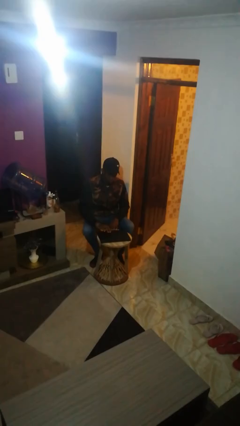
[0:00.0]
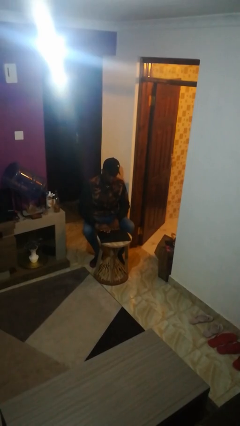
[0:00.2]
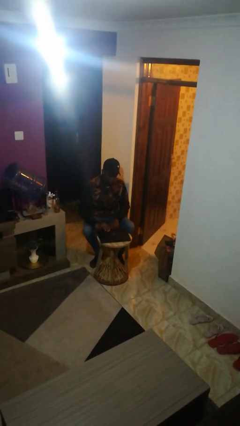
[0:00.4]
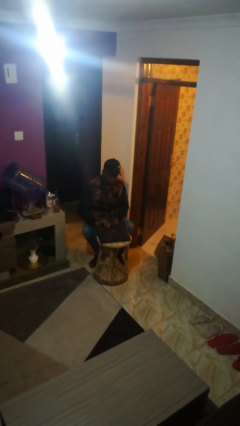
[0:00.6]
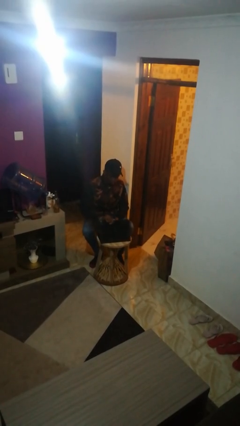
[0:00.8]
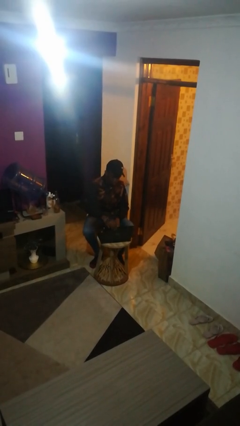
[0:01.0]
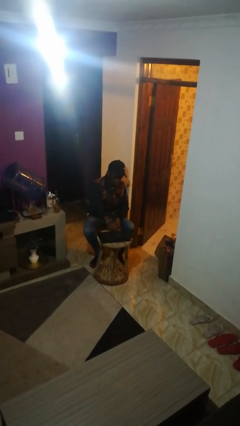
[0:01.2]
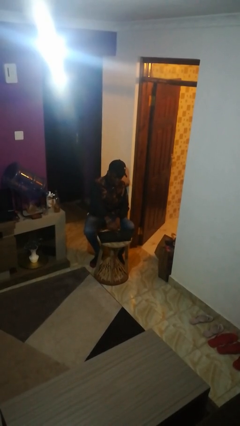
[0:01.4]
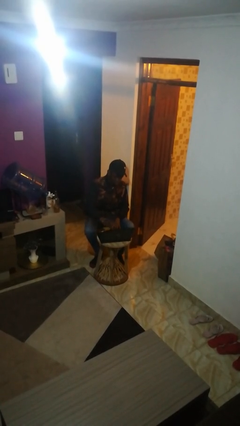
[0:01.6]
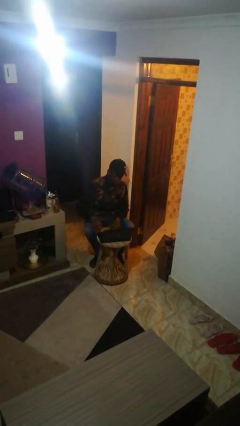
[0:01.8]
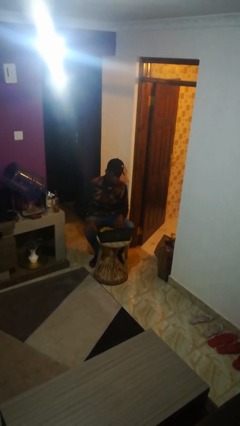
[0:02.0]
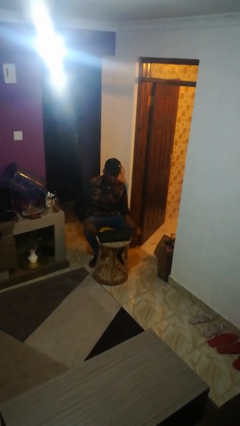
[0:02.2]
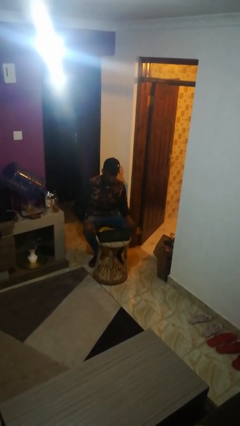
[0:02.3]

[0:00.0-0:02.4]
person opens laptop

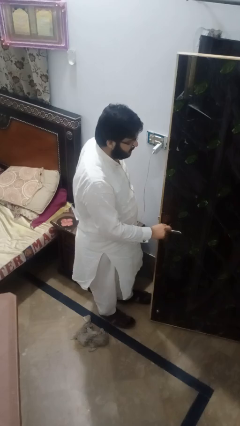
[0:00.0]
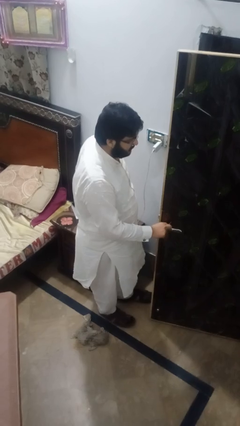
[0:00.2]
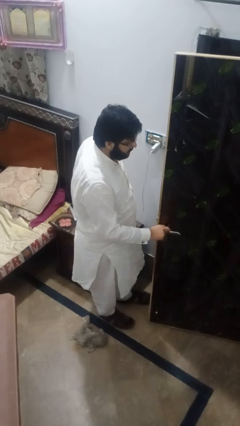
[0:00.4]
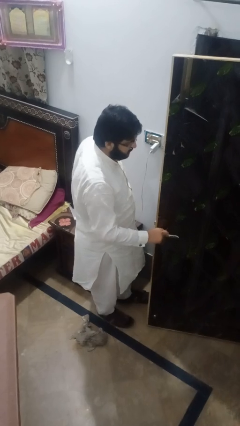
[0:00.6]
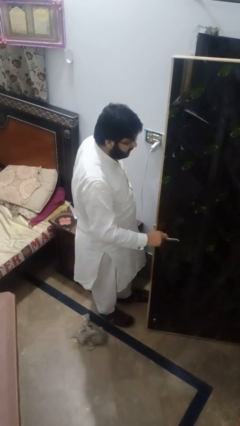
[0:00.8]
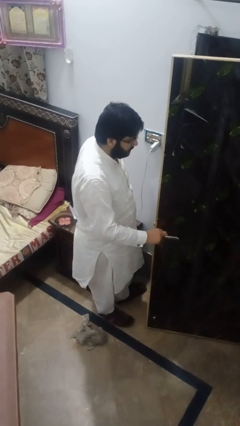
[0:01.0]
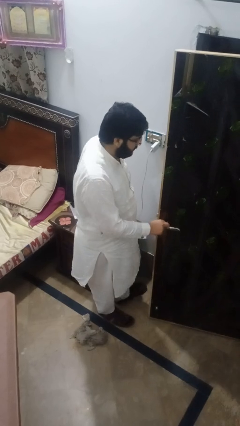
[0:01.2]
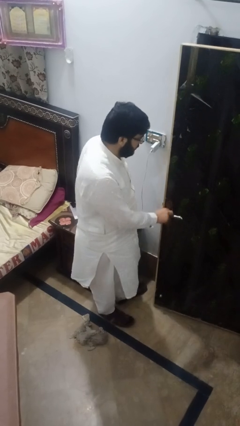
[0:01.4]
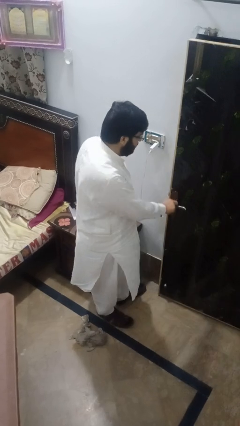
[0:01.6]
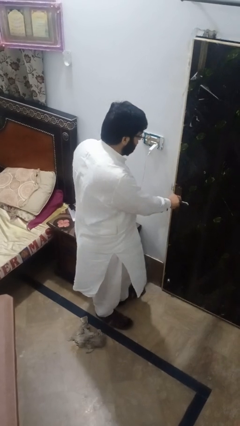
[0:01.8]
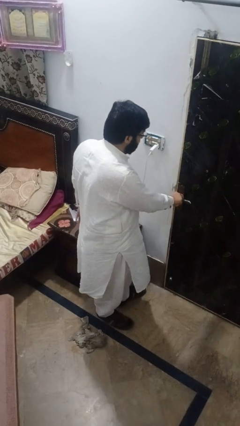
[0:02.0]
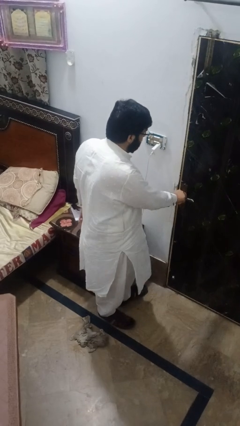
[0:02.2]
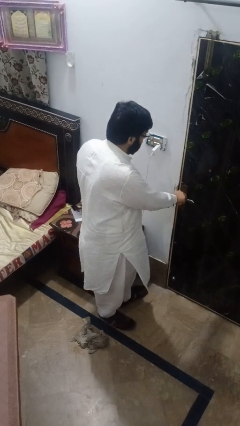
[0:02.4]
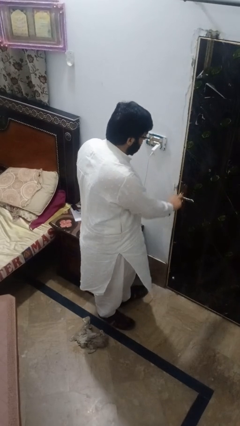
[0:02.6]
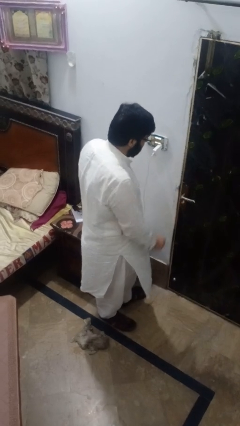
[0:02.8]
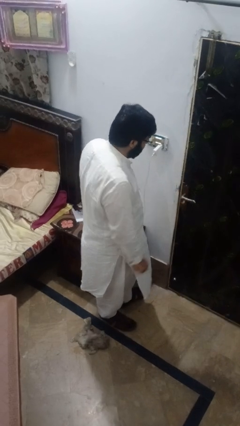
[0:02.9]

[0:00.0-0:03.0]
person closes facility door

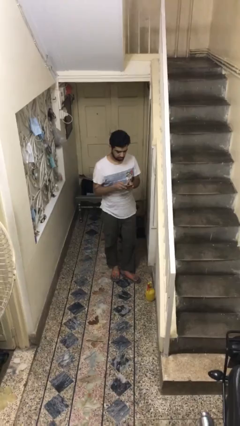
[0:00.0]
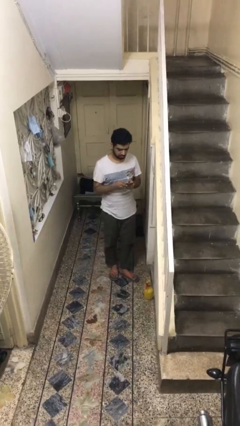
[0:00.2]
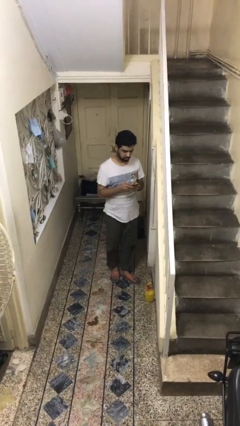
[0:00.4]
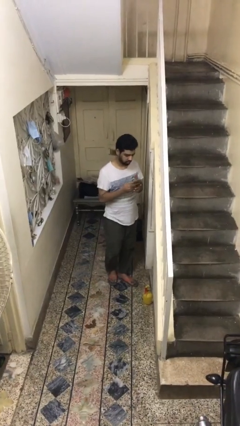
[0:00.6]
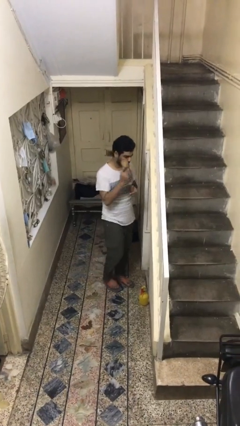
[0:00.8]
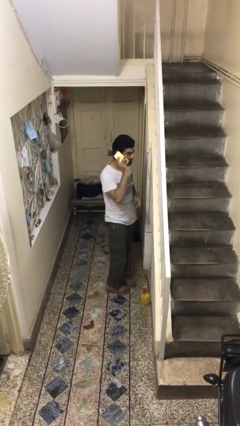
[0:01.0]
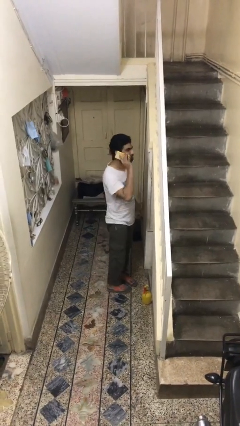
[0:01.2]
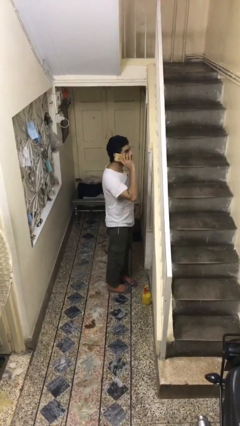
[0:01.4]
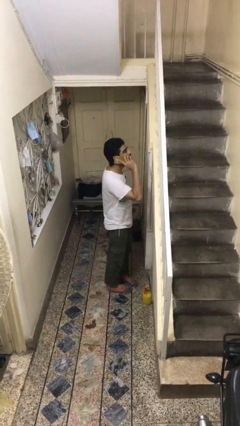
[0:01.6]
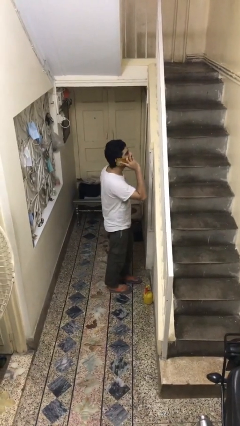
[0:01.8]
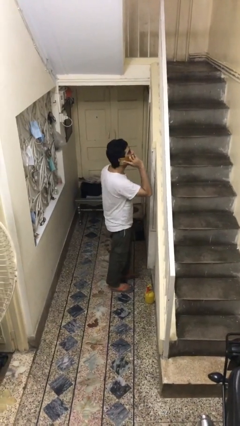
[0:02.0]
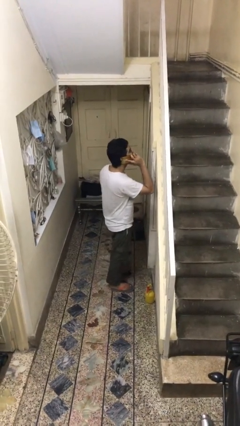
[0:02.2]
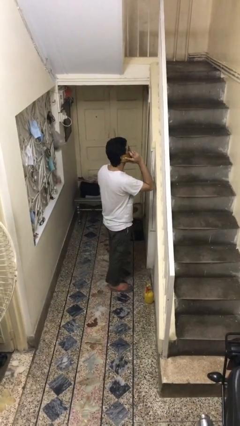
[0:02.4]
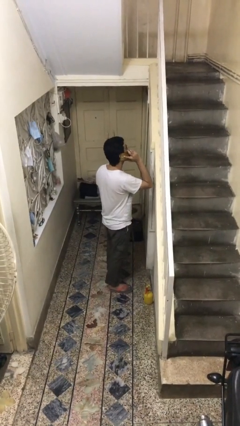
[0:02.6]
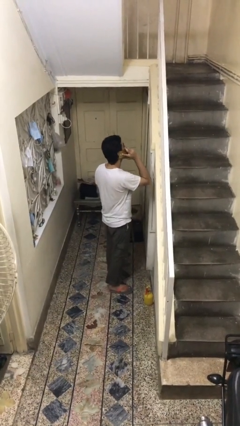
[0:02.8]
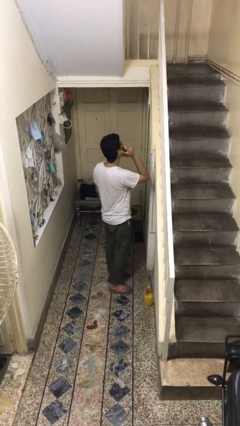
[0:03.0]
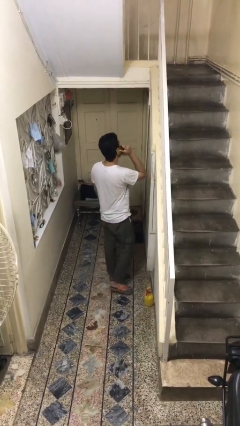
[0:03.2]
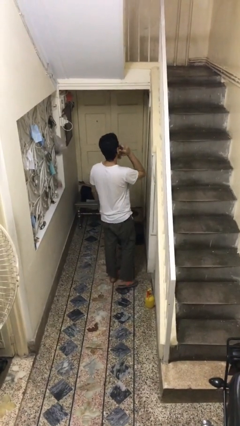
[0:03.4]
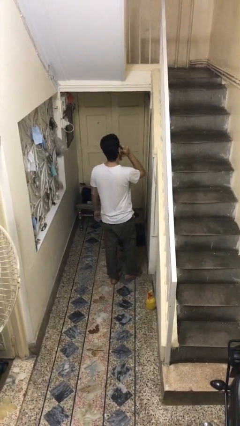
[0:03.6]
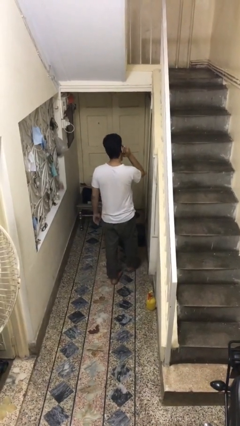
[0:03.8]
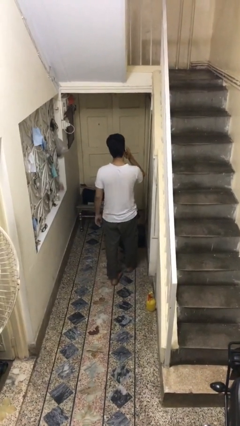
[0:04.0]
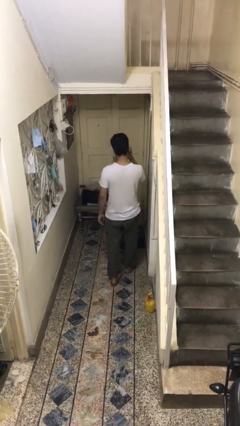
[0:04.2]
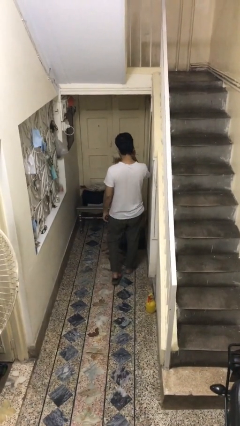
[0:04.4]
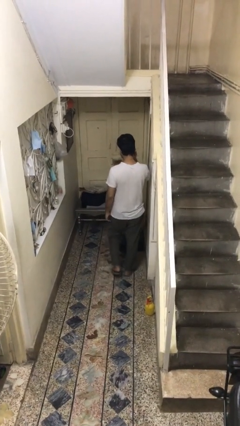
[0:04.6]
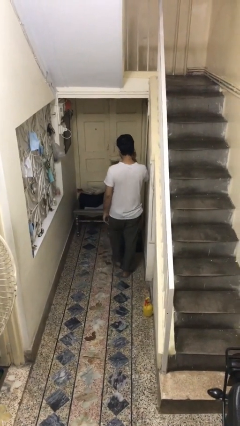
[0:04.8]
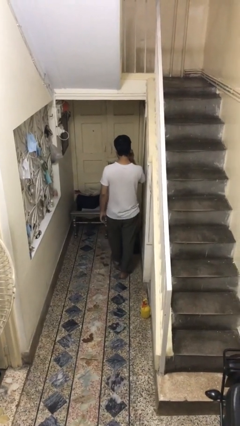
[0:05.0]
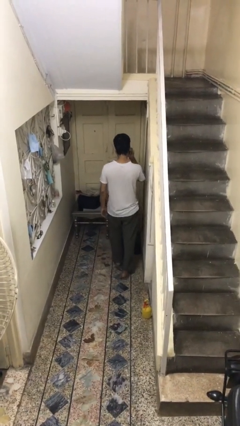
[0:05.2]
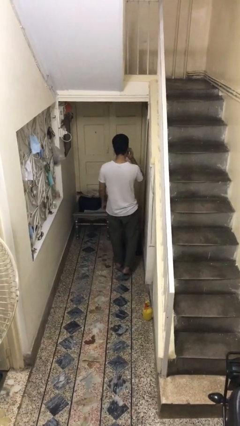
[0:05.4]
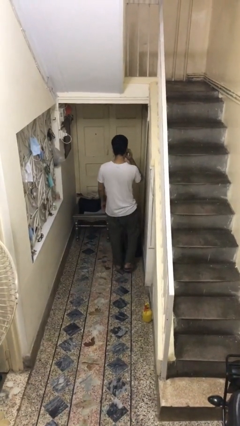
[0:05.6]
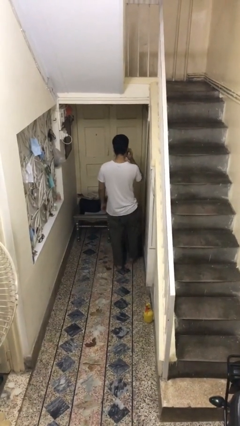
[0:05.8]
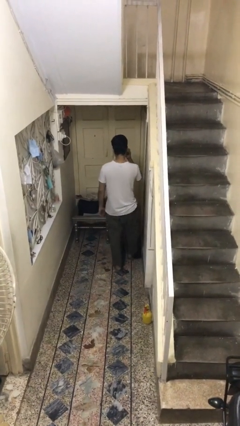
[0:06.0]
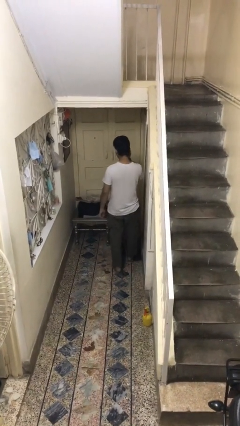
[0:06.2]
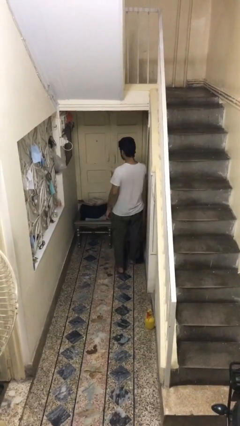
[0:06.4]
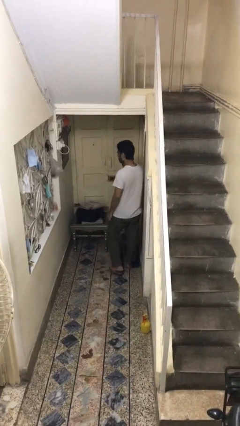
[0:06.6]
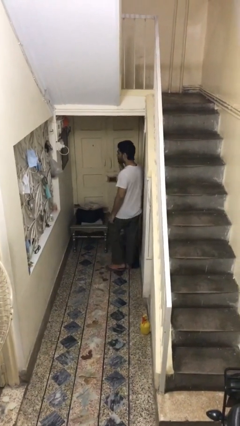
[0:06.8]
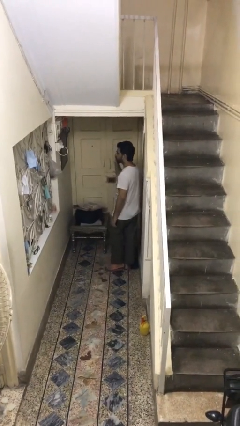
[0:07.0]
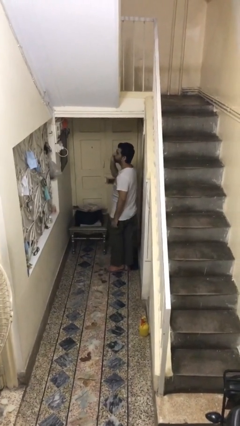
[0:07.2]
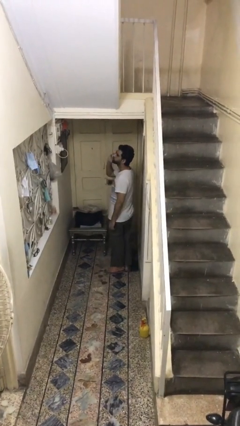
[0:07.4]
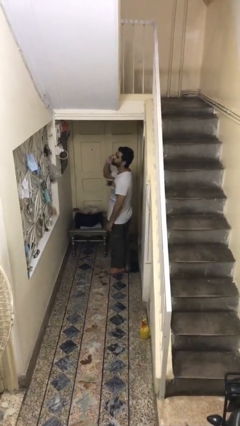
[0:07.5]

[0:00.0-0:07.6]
person talks on phone

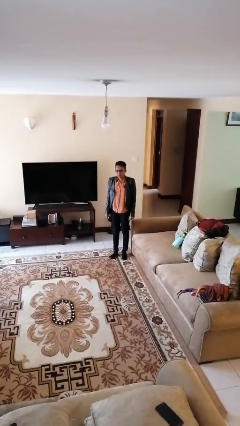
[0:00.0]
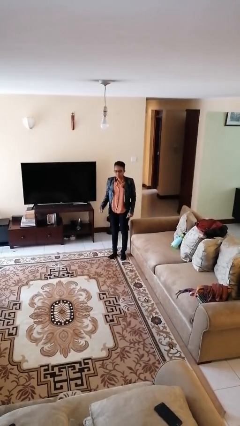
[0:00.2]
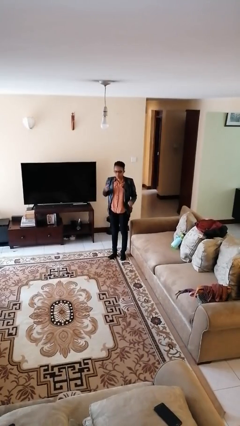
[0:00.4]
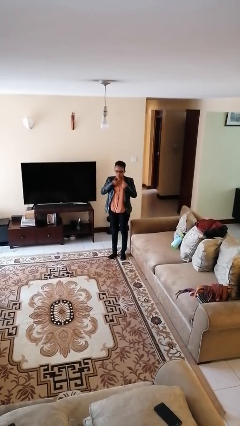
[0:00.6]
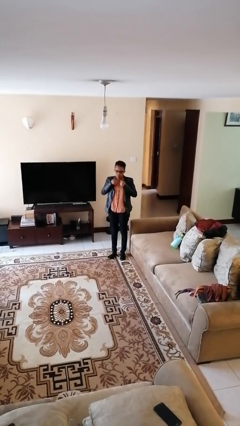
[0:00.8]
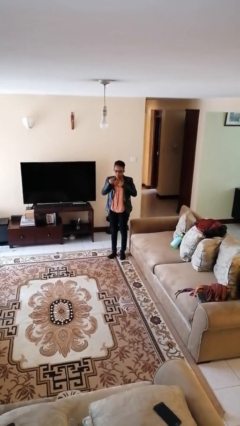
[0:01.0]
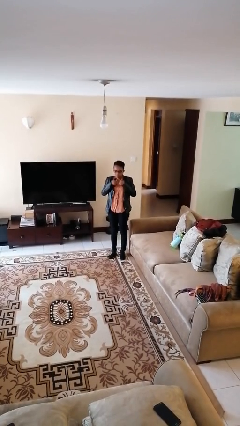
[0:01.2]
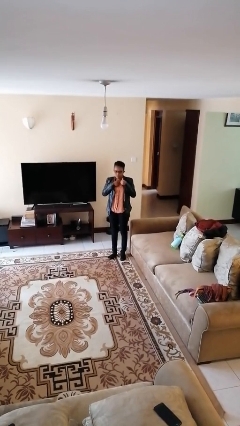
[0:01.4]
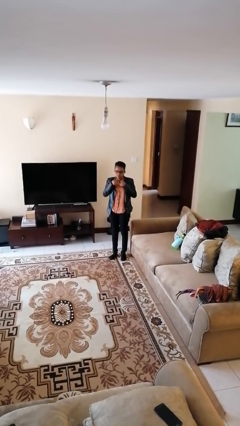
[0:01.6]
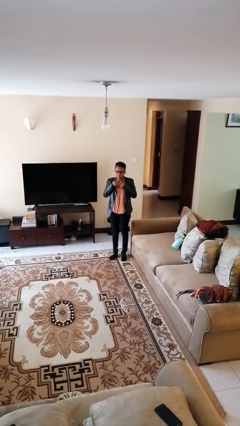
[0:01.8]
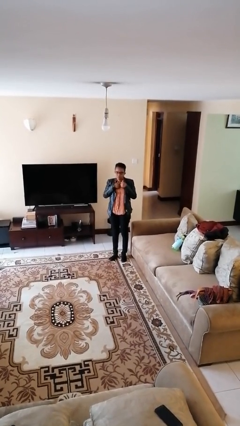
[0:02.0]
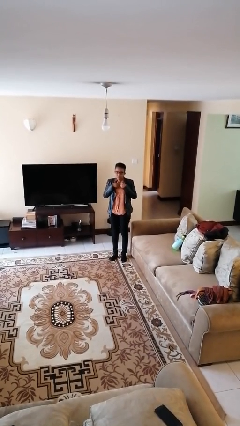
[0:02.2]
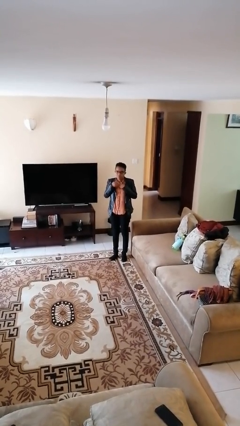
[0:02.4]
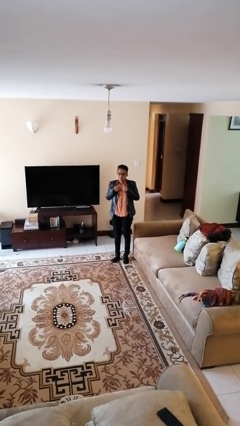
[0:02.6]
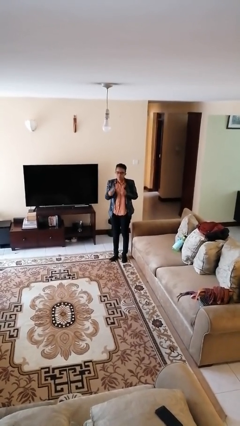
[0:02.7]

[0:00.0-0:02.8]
person drums on chest

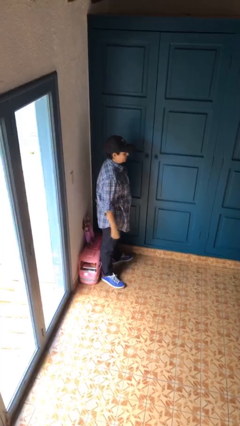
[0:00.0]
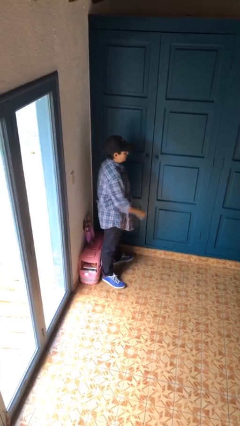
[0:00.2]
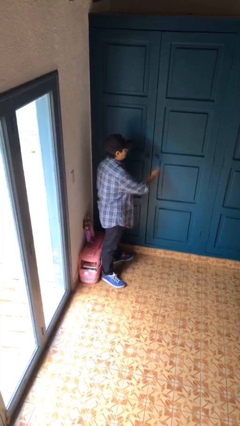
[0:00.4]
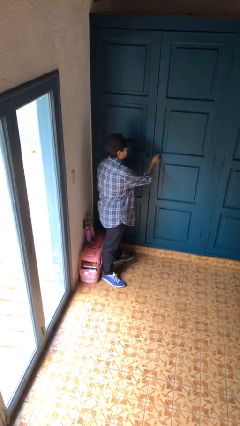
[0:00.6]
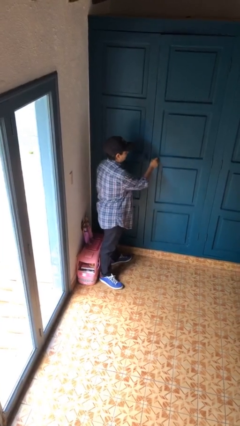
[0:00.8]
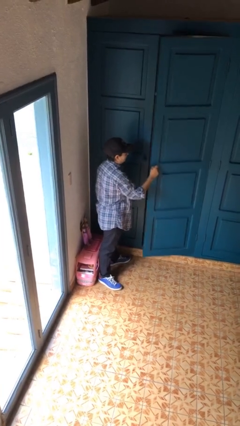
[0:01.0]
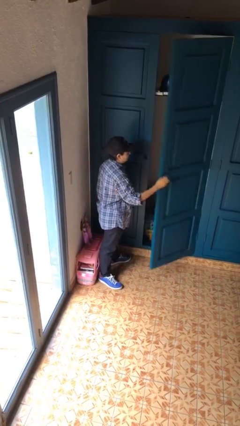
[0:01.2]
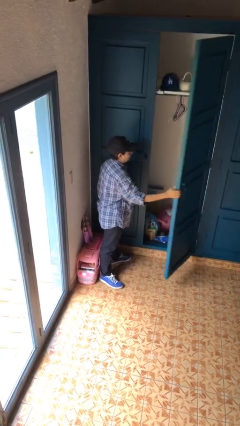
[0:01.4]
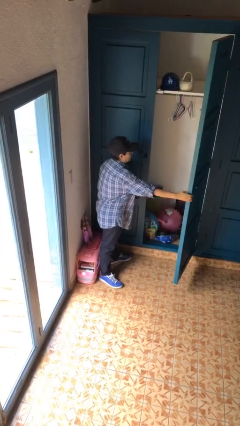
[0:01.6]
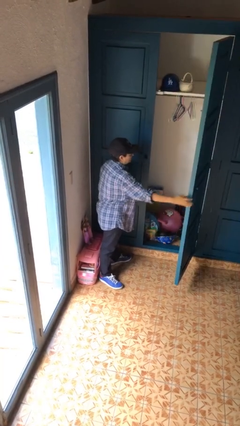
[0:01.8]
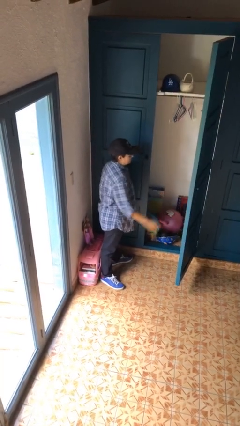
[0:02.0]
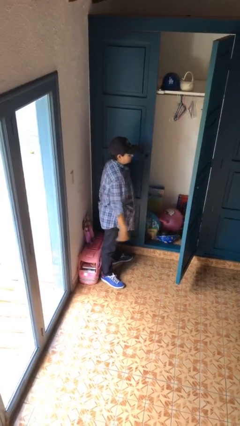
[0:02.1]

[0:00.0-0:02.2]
person opens closet door
